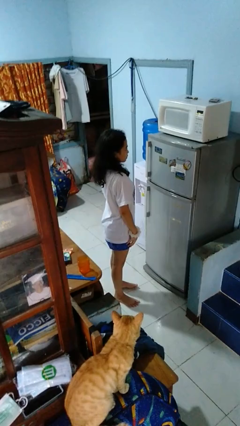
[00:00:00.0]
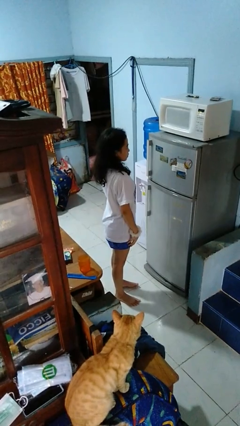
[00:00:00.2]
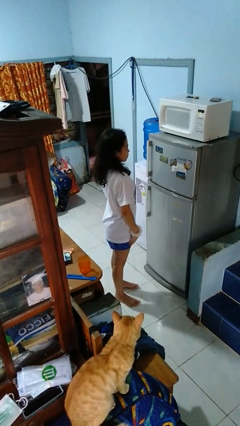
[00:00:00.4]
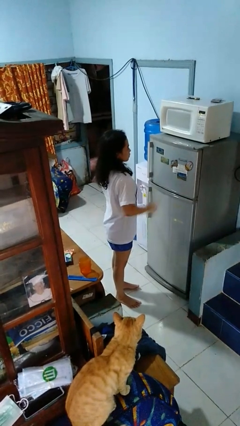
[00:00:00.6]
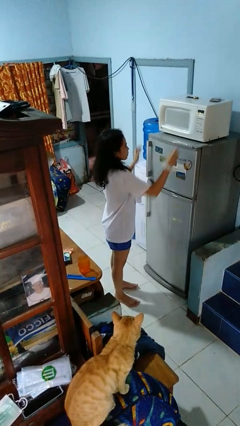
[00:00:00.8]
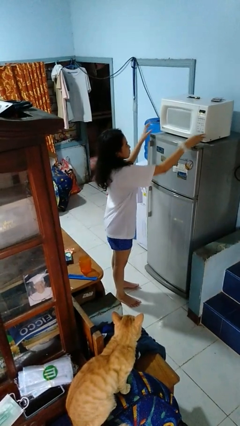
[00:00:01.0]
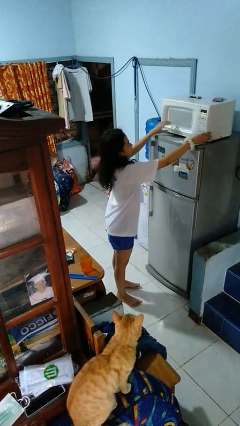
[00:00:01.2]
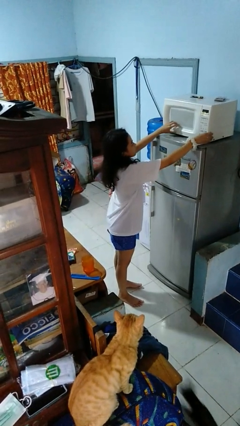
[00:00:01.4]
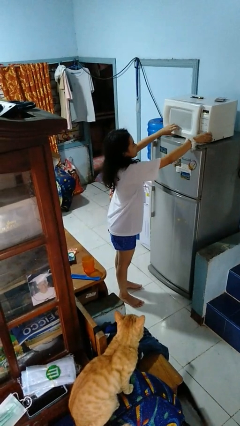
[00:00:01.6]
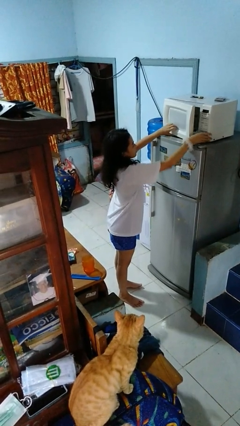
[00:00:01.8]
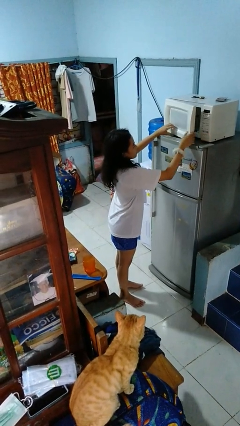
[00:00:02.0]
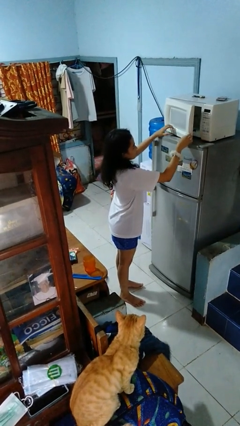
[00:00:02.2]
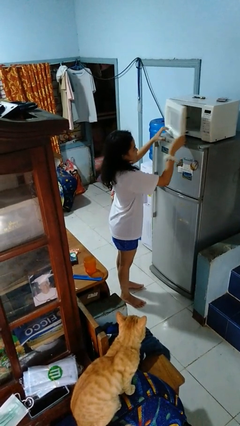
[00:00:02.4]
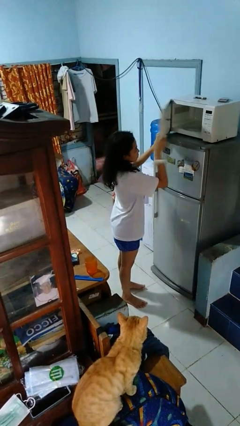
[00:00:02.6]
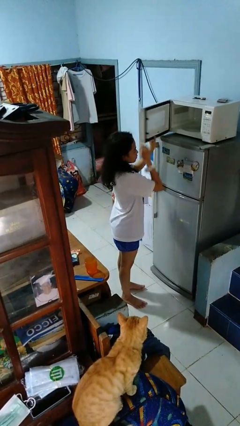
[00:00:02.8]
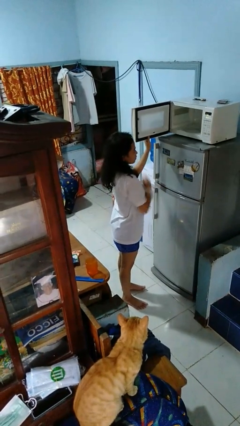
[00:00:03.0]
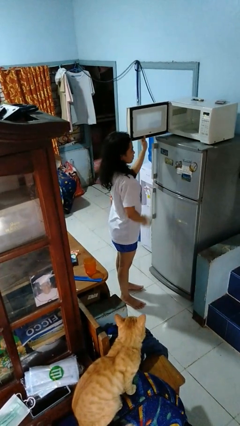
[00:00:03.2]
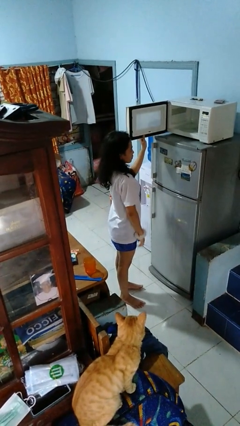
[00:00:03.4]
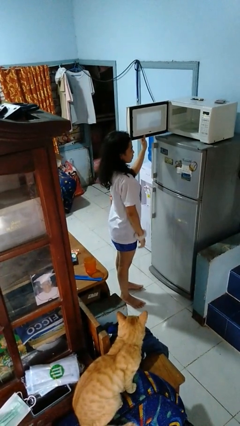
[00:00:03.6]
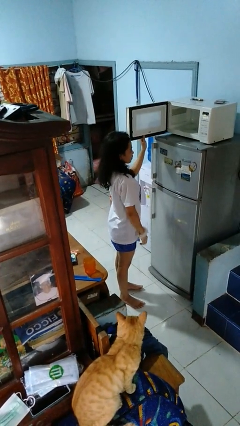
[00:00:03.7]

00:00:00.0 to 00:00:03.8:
person opens microwave

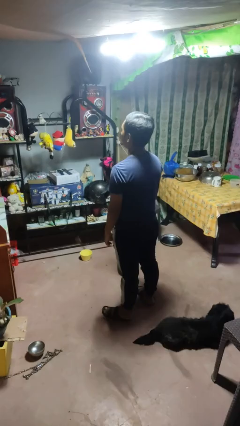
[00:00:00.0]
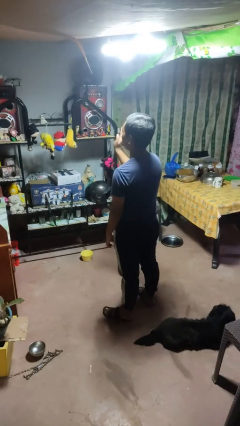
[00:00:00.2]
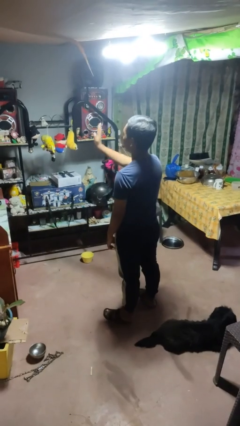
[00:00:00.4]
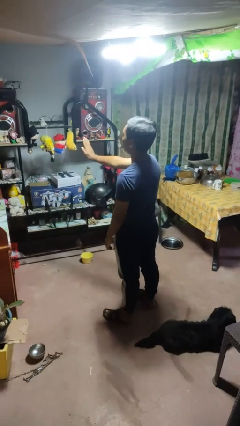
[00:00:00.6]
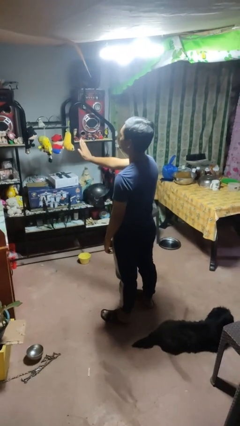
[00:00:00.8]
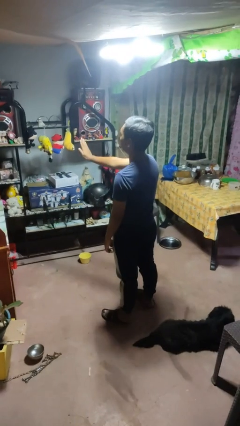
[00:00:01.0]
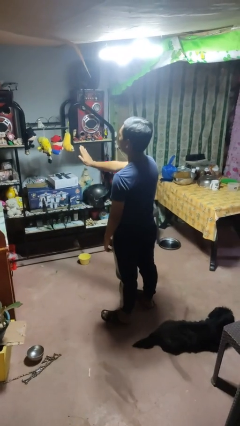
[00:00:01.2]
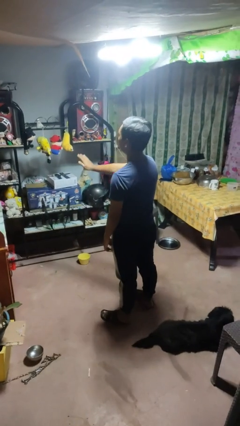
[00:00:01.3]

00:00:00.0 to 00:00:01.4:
person gestures stop

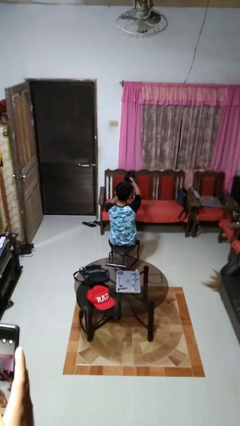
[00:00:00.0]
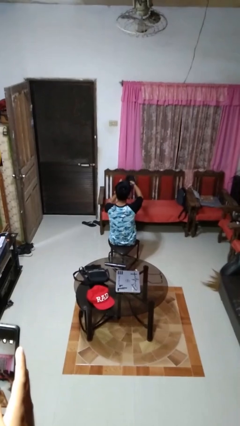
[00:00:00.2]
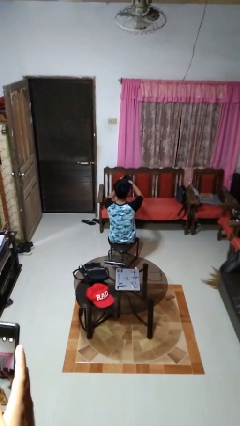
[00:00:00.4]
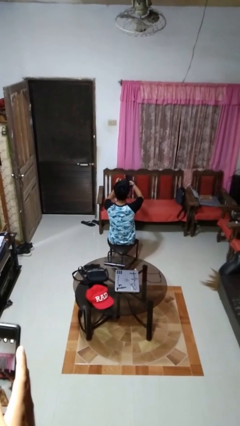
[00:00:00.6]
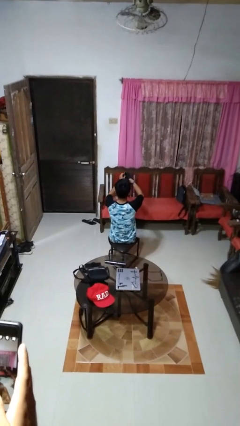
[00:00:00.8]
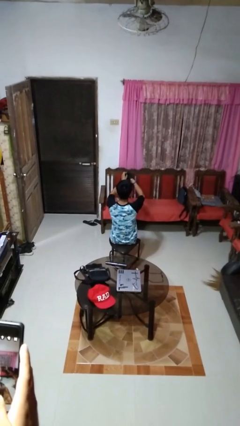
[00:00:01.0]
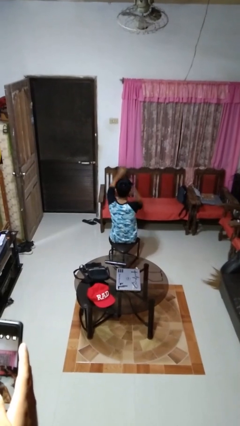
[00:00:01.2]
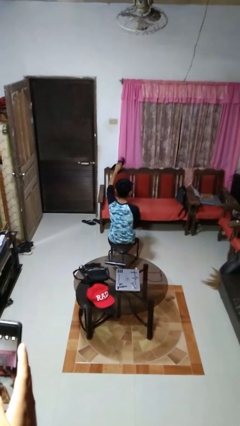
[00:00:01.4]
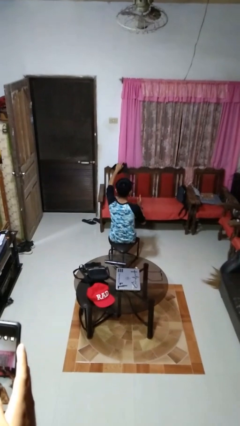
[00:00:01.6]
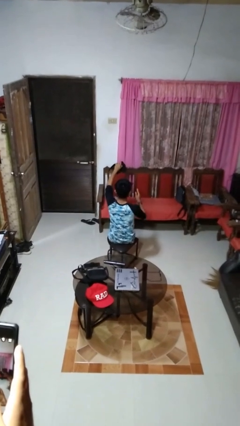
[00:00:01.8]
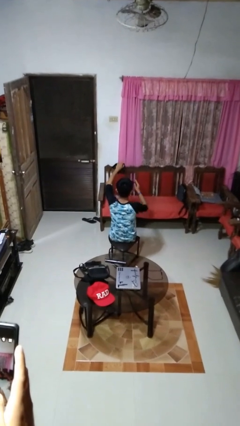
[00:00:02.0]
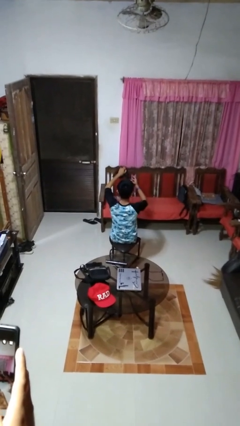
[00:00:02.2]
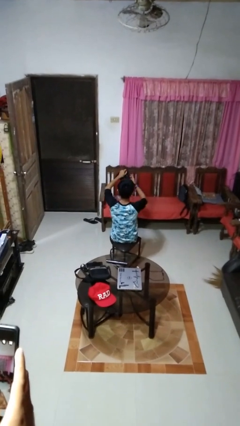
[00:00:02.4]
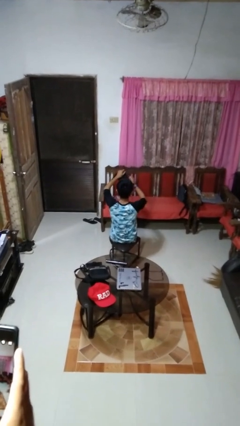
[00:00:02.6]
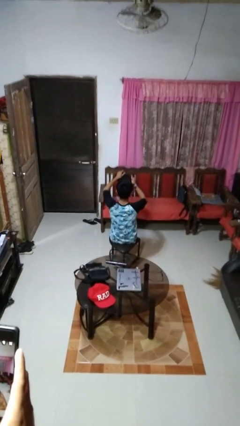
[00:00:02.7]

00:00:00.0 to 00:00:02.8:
person takes off gloves

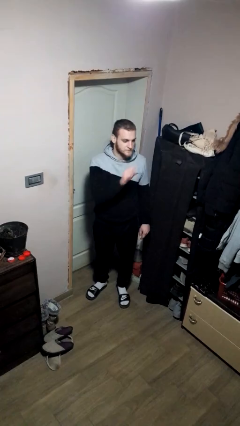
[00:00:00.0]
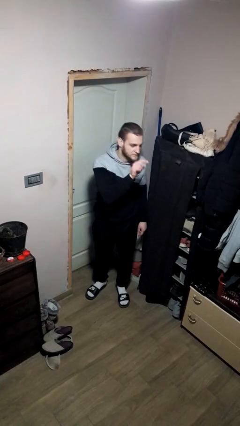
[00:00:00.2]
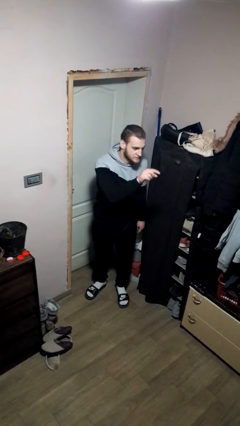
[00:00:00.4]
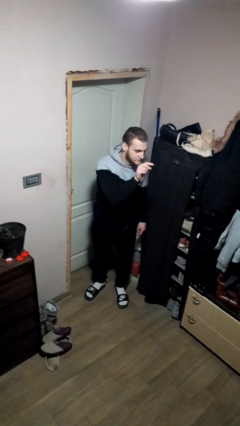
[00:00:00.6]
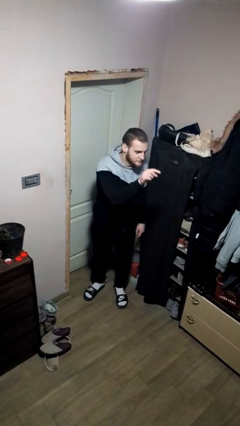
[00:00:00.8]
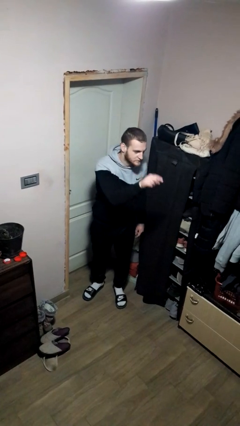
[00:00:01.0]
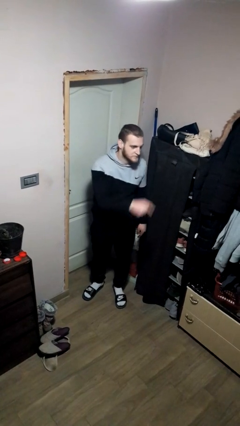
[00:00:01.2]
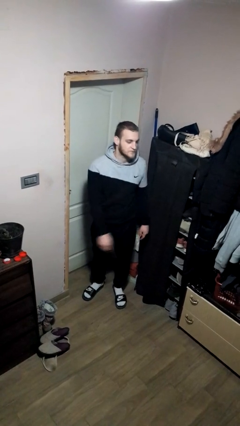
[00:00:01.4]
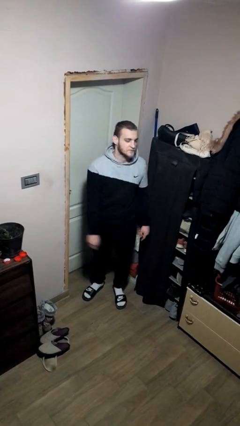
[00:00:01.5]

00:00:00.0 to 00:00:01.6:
person points at person

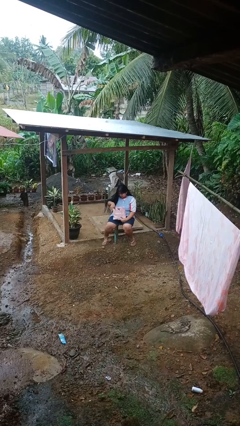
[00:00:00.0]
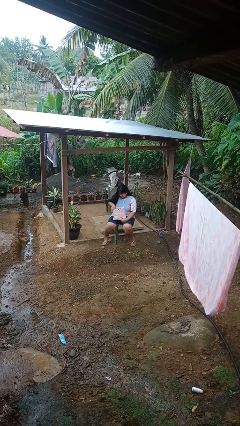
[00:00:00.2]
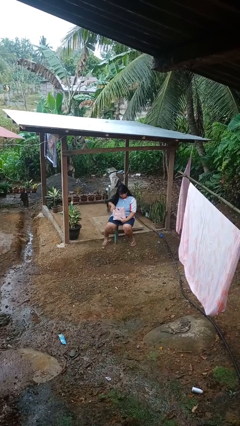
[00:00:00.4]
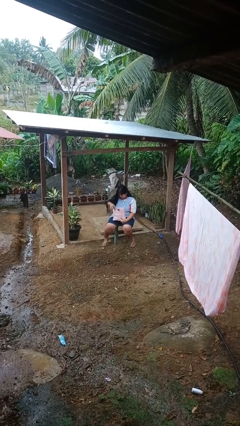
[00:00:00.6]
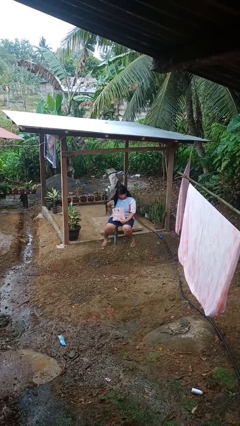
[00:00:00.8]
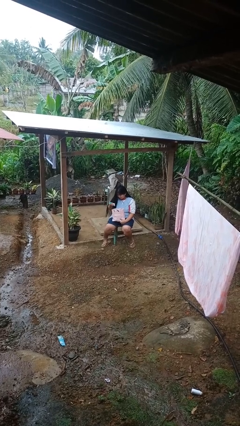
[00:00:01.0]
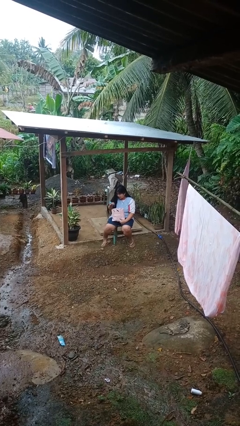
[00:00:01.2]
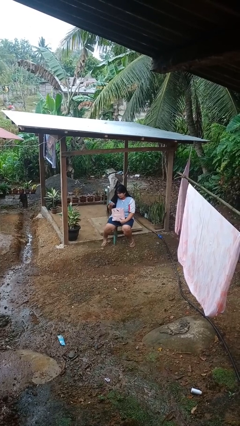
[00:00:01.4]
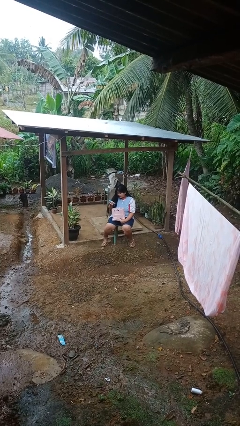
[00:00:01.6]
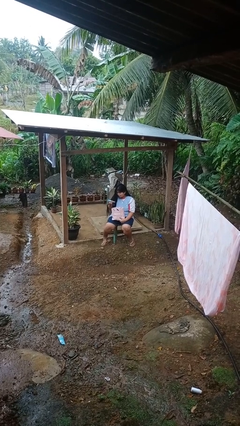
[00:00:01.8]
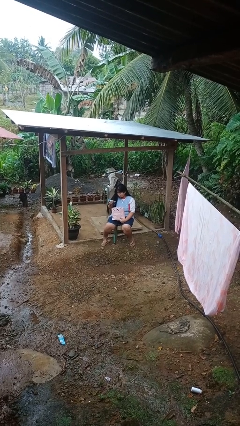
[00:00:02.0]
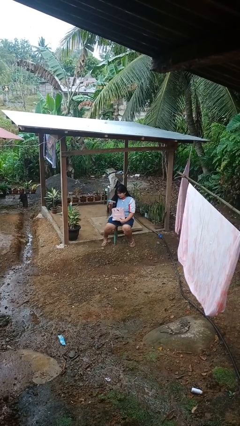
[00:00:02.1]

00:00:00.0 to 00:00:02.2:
person takes object from bag

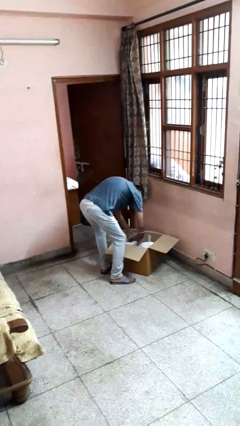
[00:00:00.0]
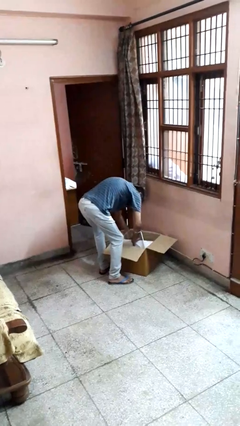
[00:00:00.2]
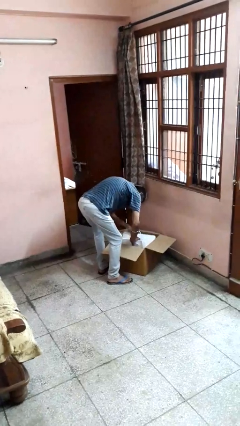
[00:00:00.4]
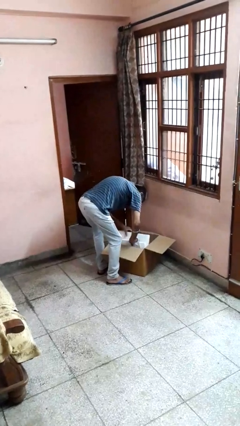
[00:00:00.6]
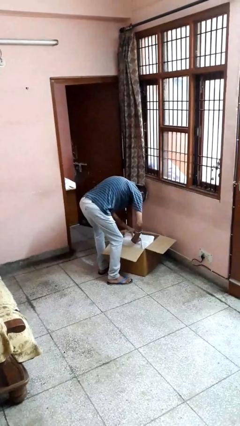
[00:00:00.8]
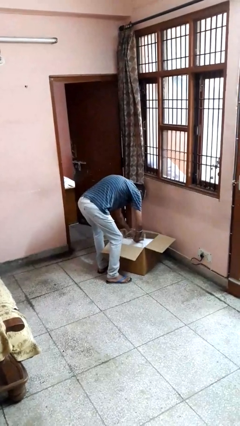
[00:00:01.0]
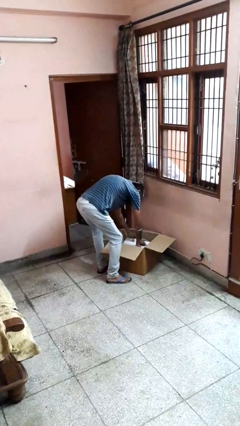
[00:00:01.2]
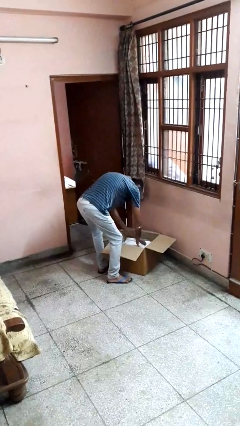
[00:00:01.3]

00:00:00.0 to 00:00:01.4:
person searches in box

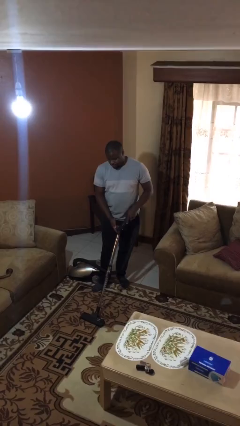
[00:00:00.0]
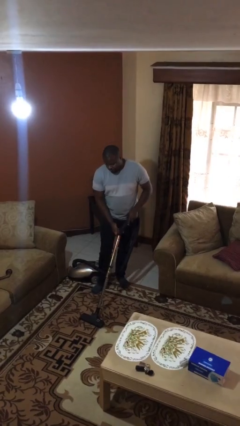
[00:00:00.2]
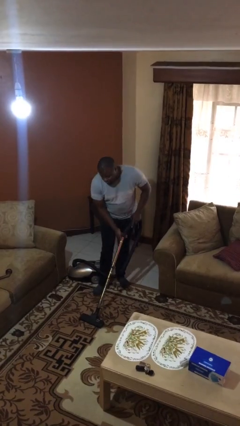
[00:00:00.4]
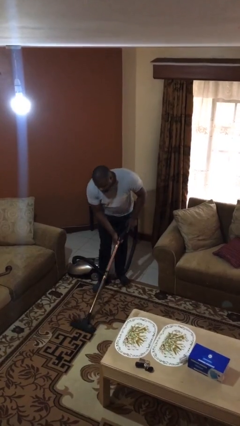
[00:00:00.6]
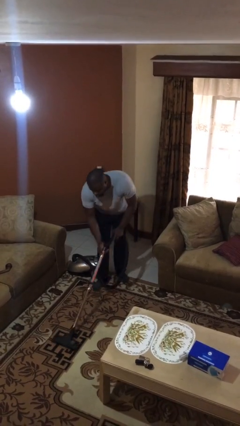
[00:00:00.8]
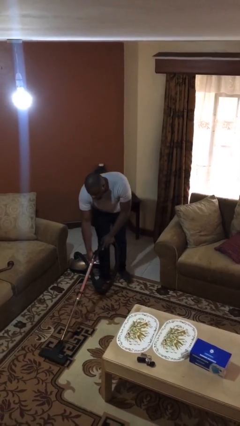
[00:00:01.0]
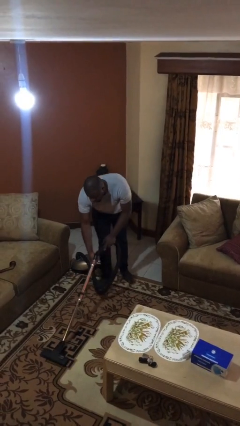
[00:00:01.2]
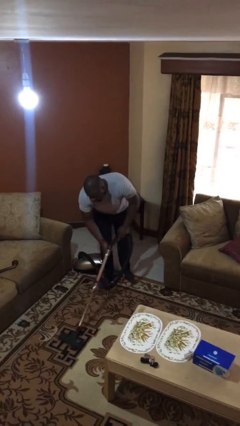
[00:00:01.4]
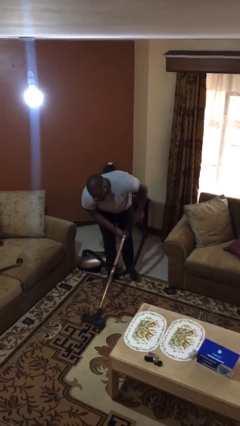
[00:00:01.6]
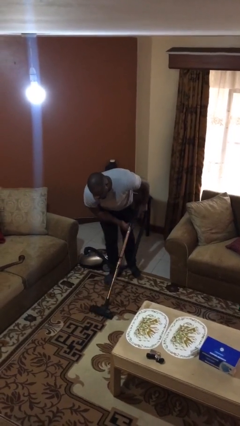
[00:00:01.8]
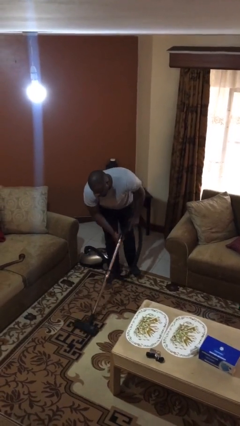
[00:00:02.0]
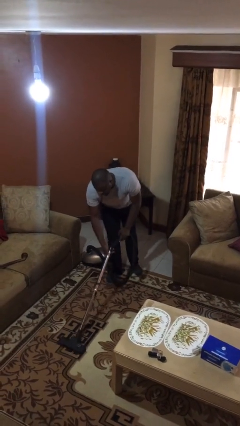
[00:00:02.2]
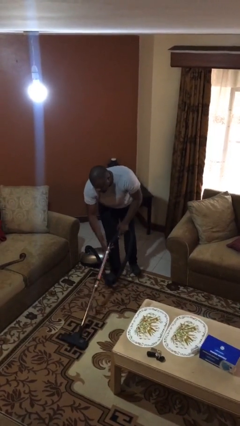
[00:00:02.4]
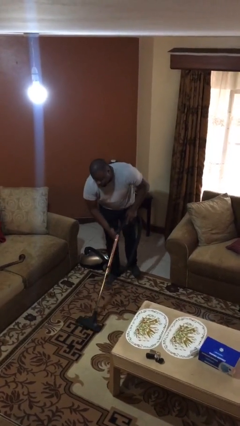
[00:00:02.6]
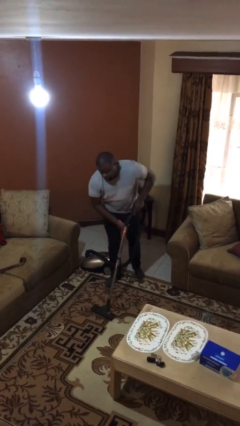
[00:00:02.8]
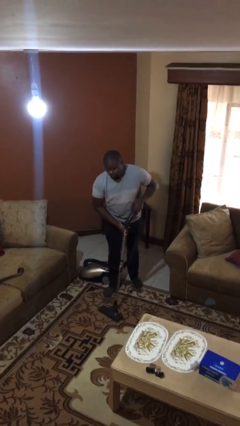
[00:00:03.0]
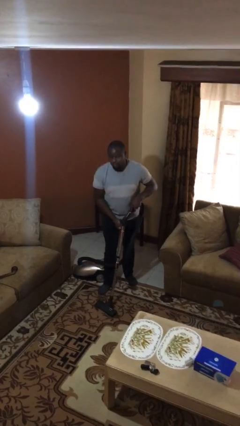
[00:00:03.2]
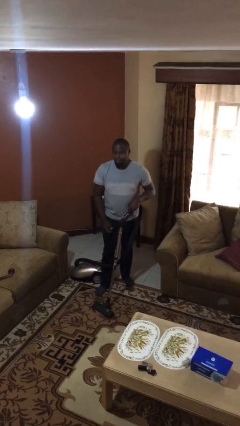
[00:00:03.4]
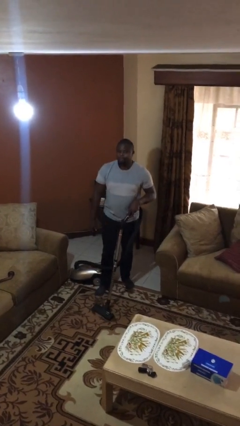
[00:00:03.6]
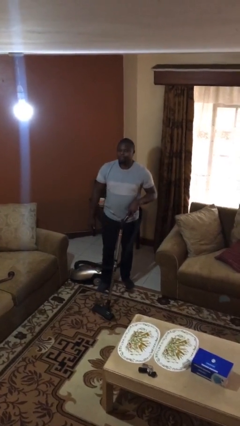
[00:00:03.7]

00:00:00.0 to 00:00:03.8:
person vacuums carpet
